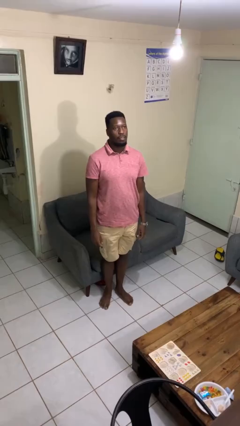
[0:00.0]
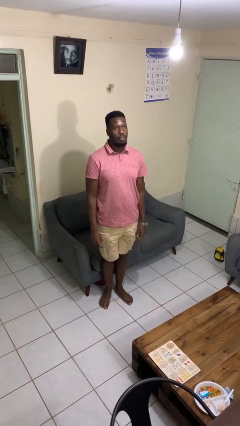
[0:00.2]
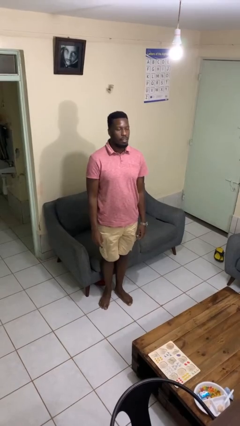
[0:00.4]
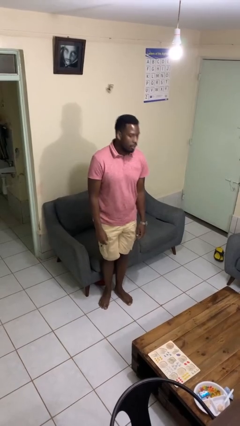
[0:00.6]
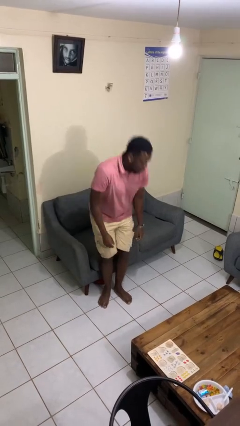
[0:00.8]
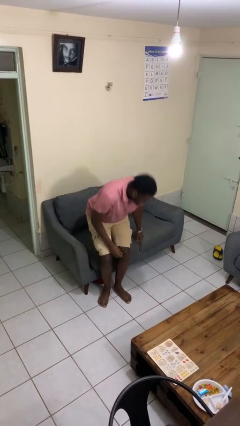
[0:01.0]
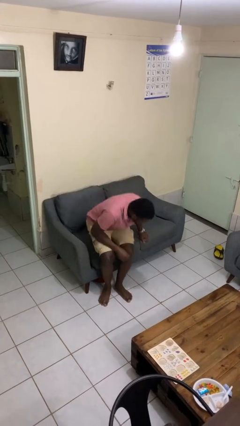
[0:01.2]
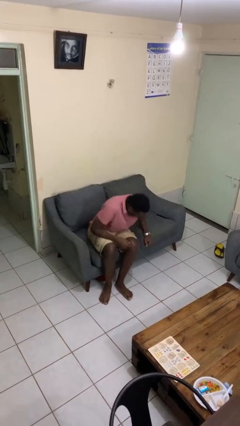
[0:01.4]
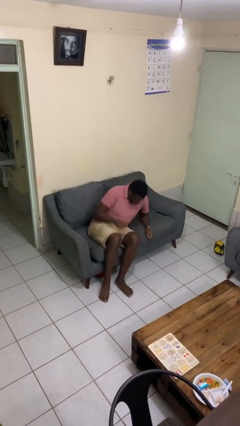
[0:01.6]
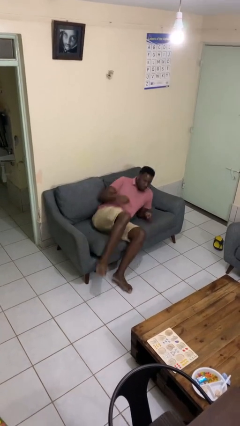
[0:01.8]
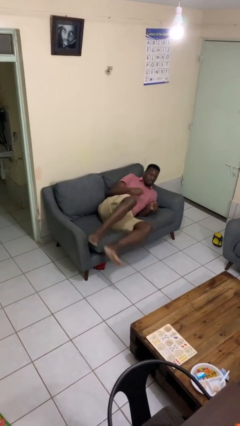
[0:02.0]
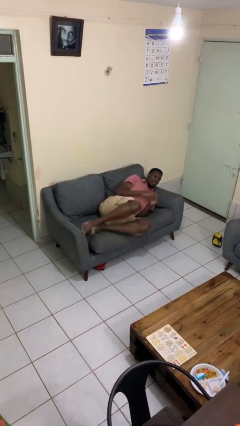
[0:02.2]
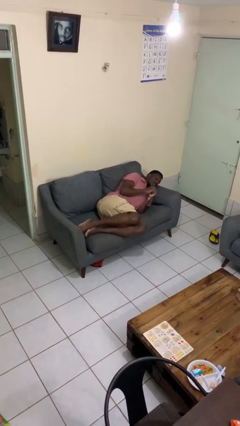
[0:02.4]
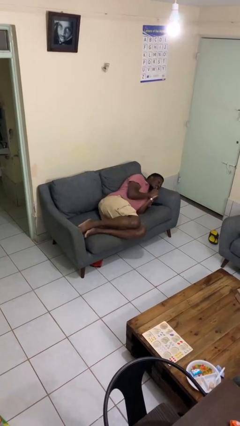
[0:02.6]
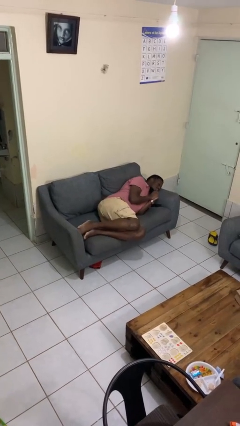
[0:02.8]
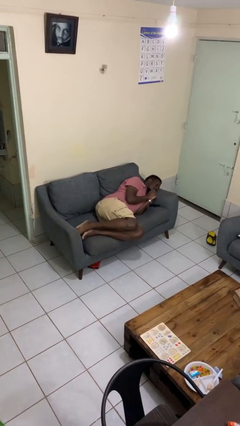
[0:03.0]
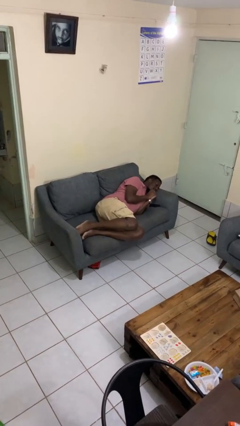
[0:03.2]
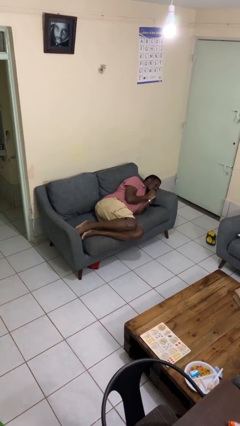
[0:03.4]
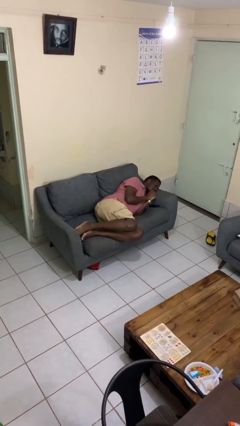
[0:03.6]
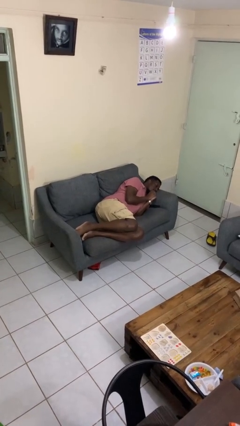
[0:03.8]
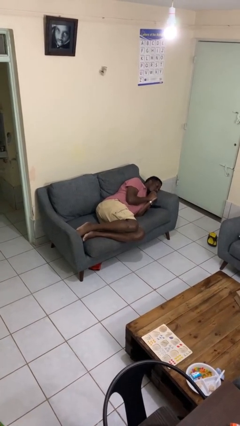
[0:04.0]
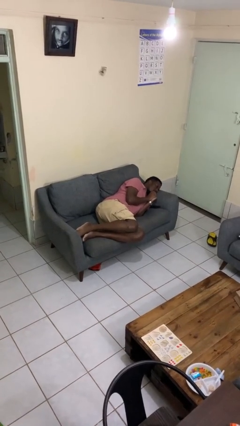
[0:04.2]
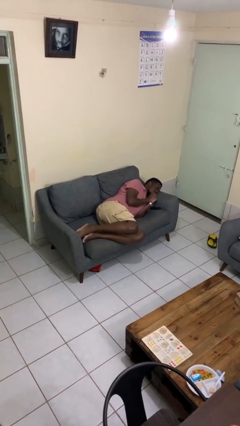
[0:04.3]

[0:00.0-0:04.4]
person lies down on couch

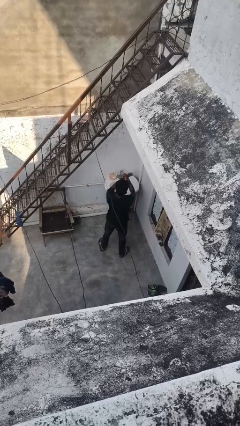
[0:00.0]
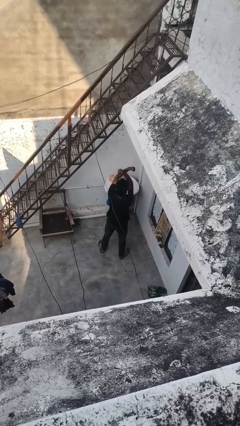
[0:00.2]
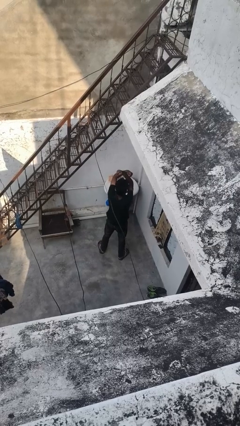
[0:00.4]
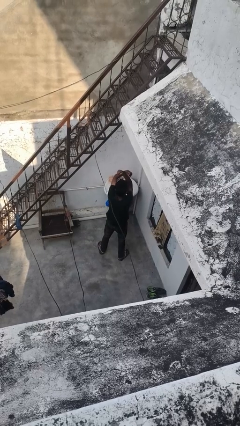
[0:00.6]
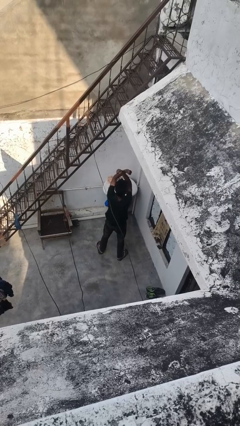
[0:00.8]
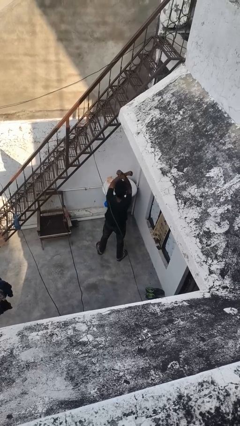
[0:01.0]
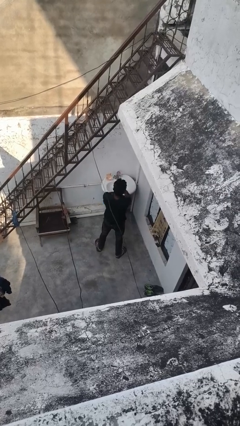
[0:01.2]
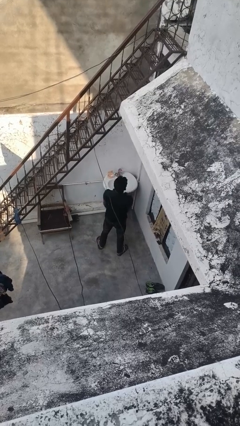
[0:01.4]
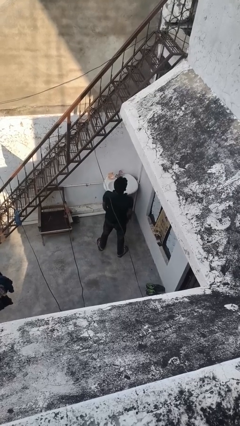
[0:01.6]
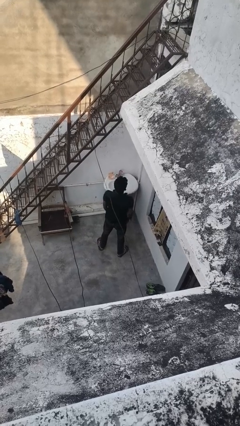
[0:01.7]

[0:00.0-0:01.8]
person gestures arms x

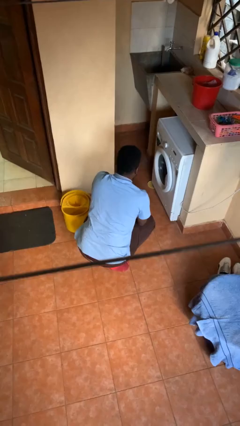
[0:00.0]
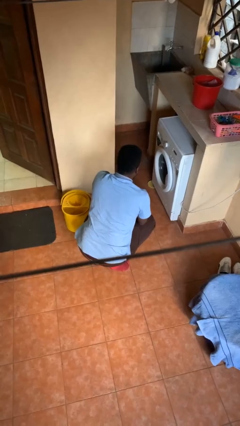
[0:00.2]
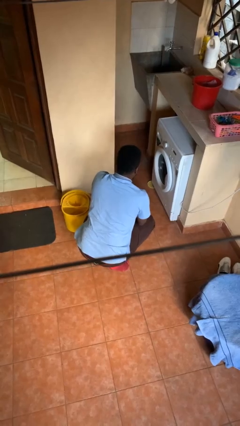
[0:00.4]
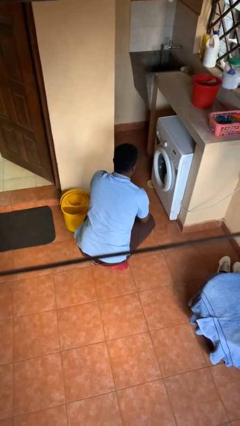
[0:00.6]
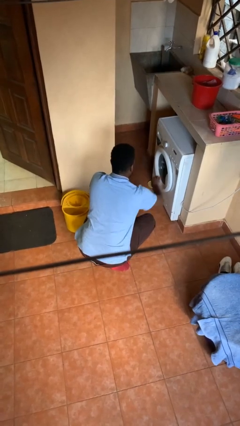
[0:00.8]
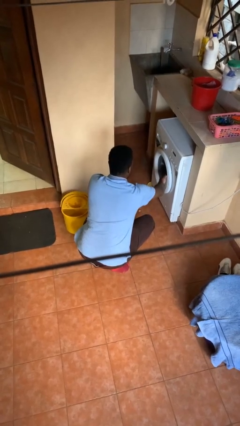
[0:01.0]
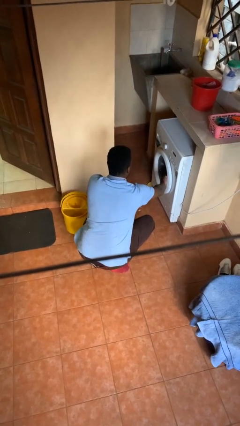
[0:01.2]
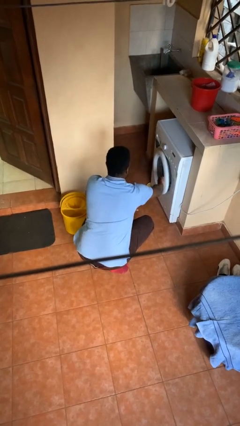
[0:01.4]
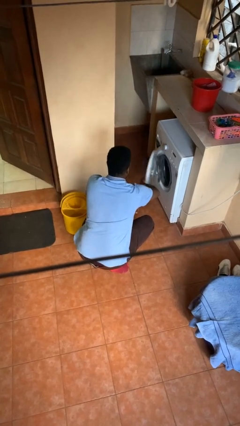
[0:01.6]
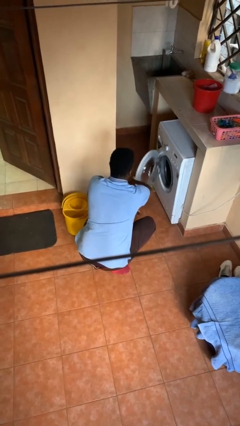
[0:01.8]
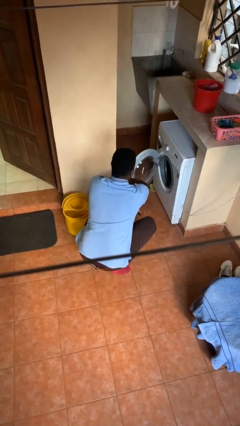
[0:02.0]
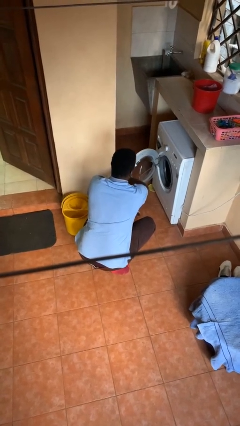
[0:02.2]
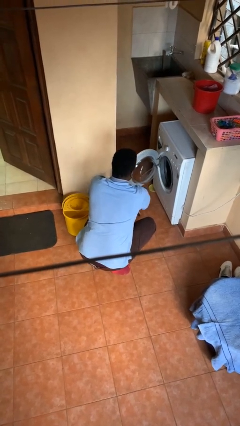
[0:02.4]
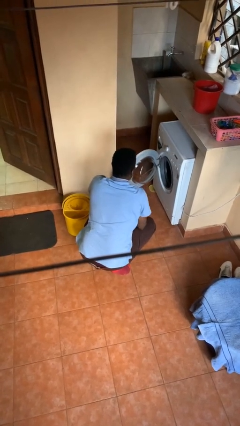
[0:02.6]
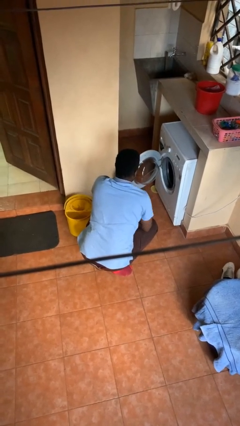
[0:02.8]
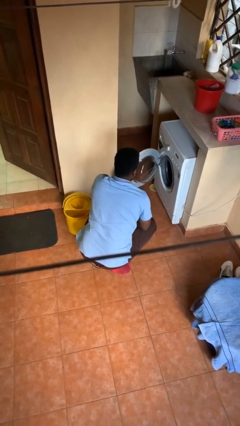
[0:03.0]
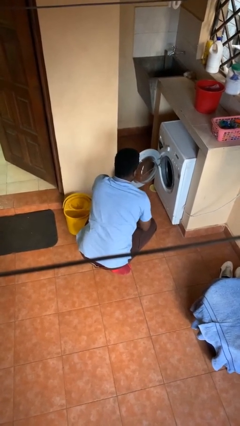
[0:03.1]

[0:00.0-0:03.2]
person opens clothes washer

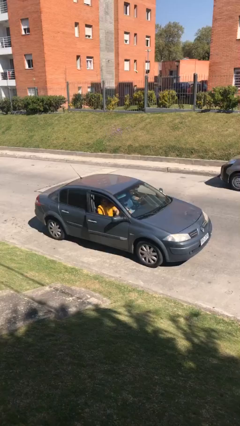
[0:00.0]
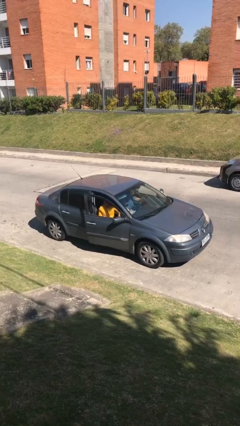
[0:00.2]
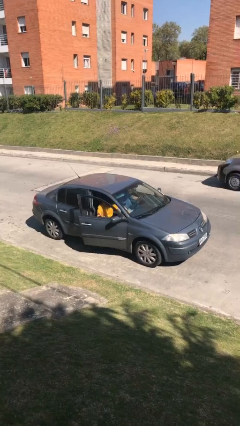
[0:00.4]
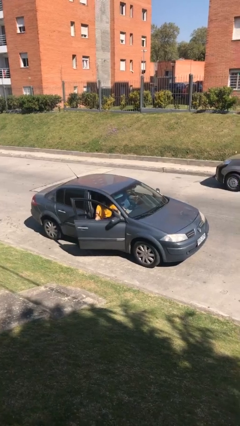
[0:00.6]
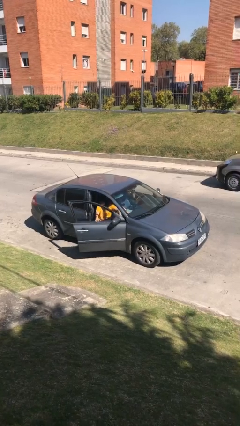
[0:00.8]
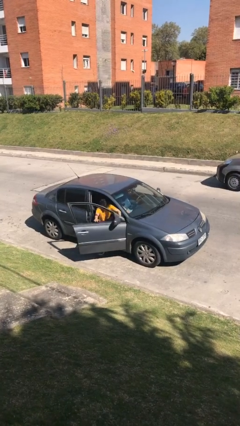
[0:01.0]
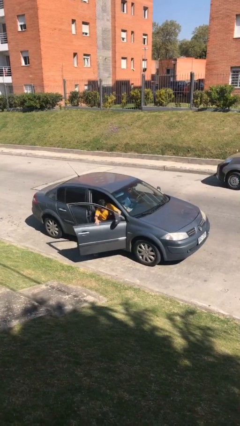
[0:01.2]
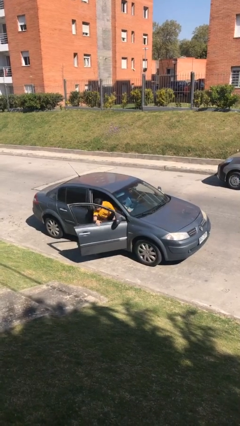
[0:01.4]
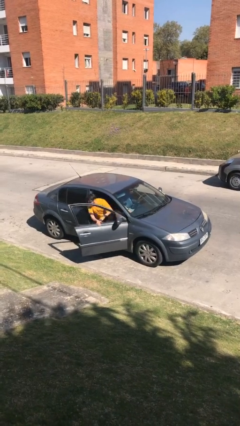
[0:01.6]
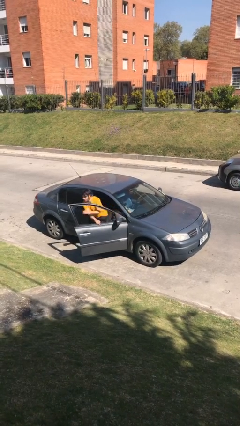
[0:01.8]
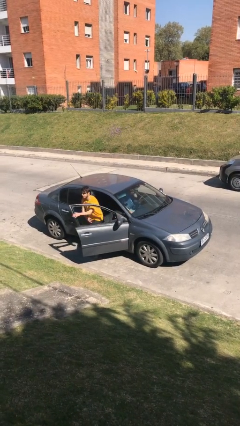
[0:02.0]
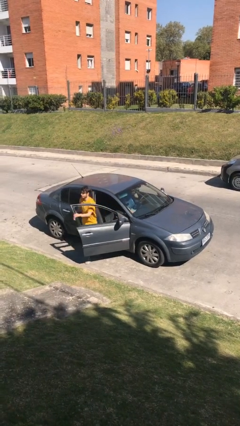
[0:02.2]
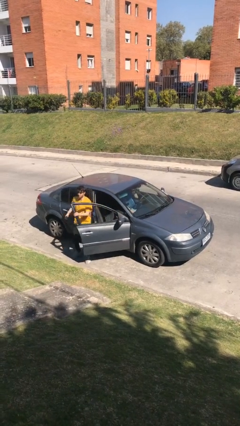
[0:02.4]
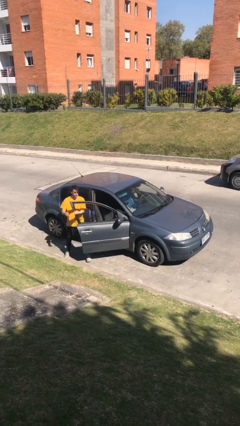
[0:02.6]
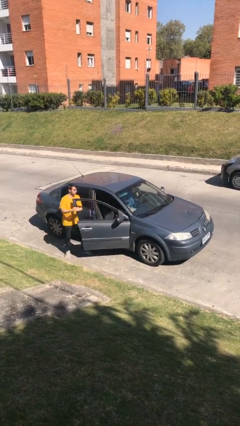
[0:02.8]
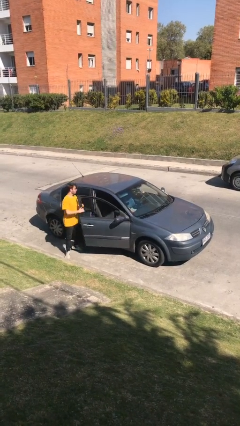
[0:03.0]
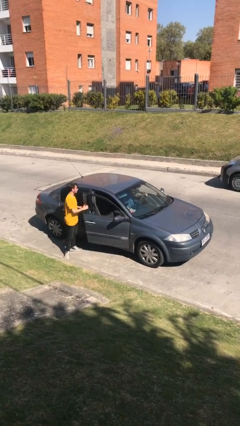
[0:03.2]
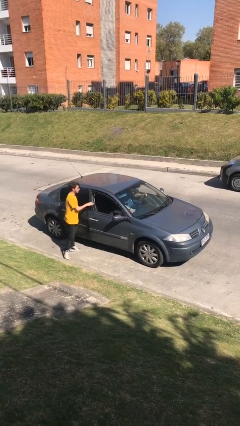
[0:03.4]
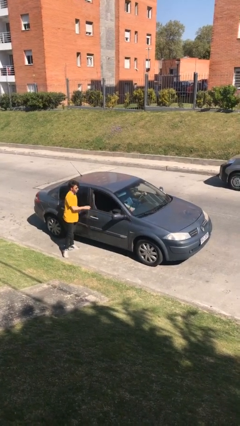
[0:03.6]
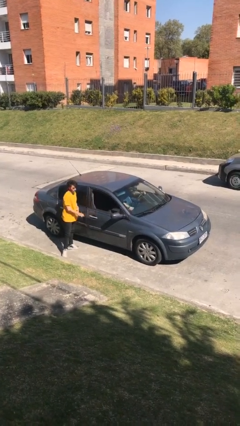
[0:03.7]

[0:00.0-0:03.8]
car drops off person

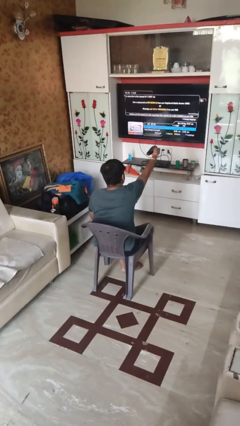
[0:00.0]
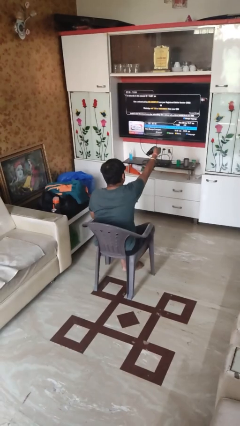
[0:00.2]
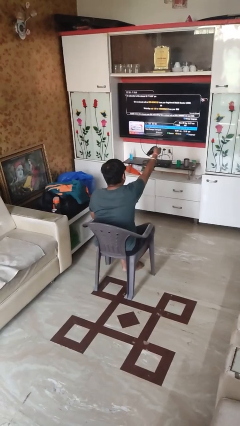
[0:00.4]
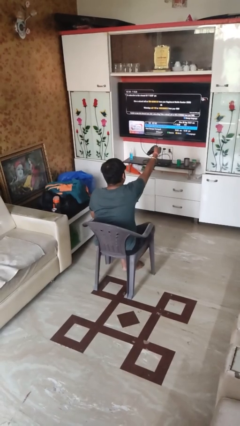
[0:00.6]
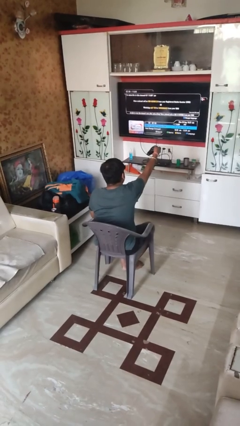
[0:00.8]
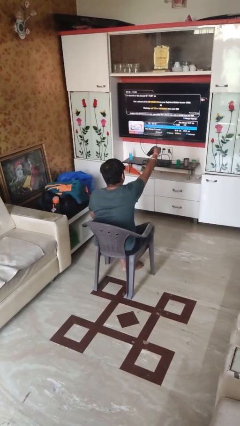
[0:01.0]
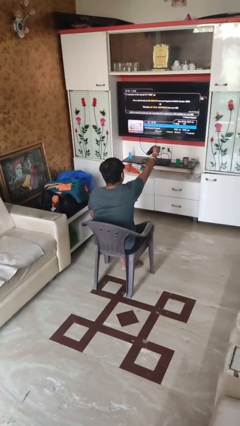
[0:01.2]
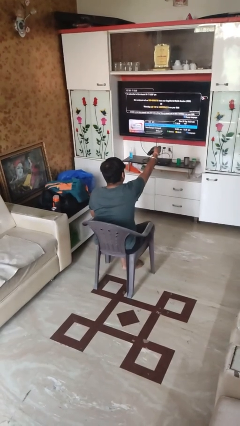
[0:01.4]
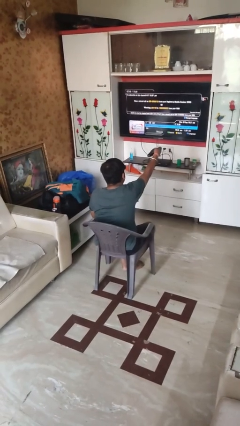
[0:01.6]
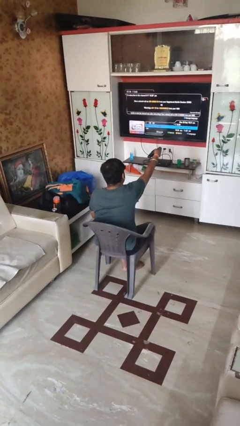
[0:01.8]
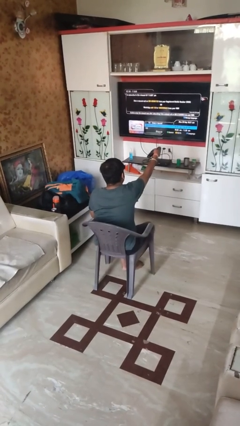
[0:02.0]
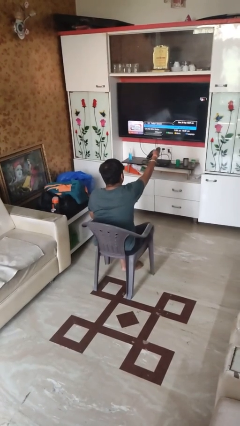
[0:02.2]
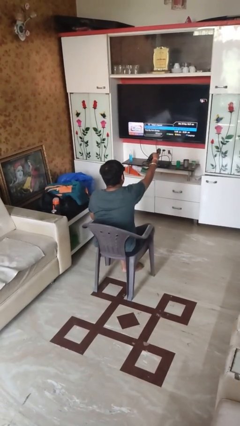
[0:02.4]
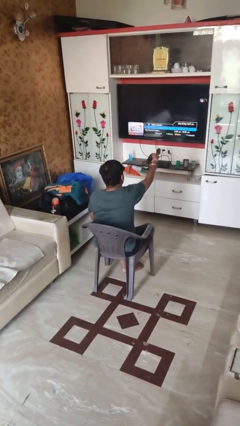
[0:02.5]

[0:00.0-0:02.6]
person uses television remote

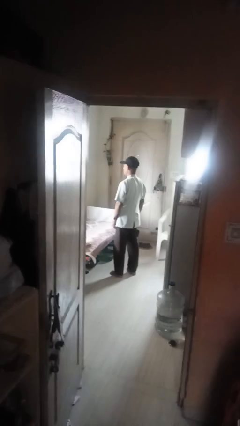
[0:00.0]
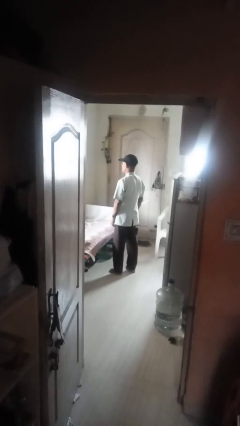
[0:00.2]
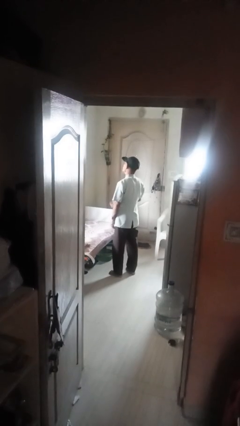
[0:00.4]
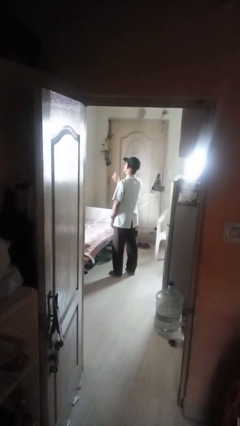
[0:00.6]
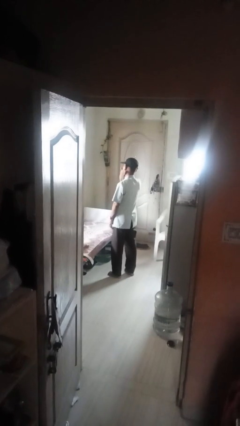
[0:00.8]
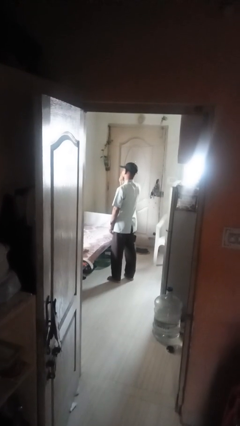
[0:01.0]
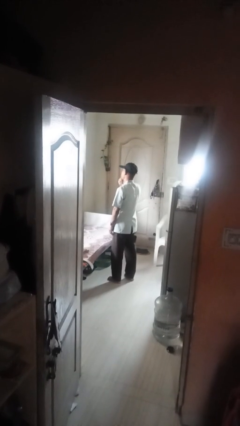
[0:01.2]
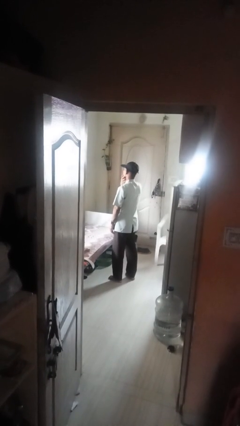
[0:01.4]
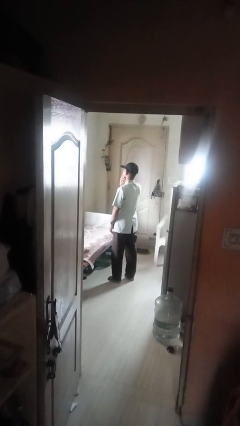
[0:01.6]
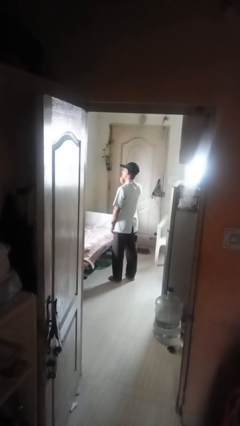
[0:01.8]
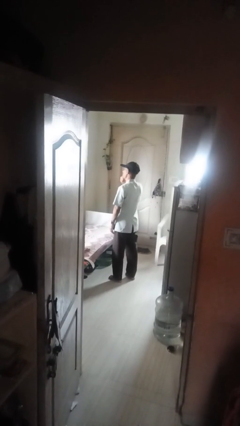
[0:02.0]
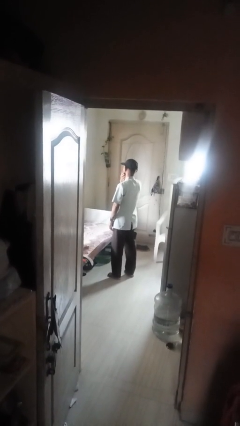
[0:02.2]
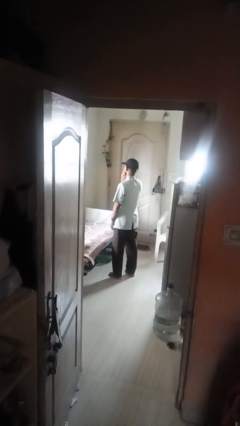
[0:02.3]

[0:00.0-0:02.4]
person strokes chin
